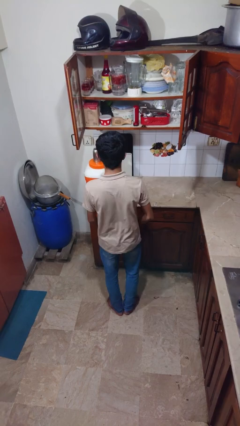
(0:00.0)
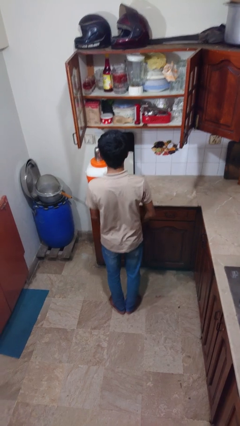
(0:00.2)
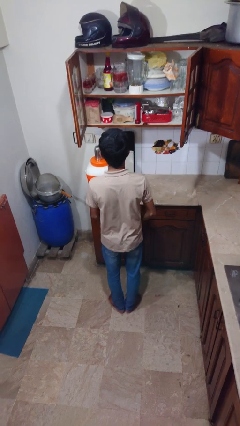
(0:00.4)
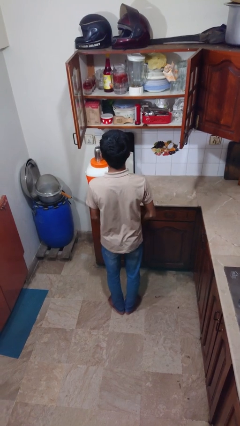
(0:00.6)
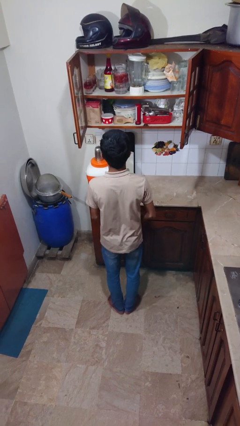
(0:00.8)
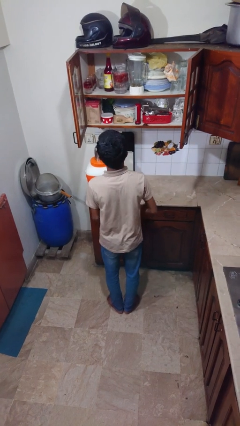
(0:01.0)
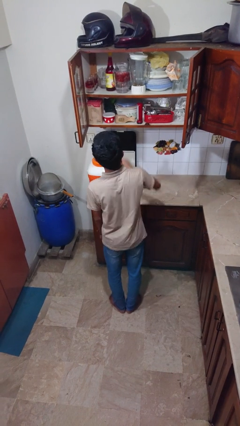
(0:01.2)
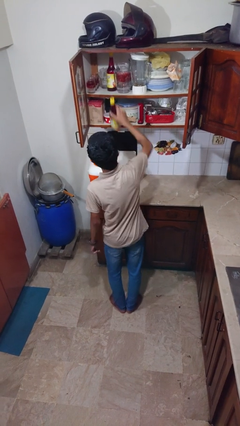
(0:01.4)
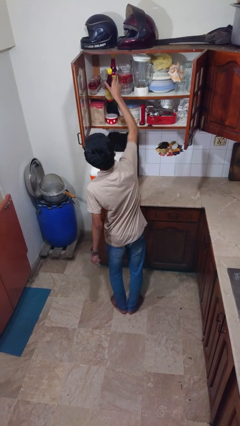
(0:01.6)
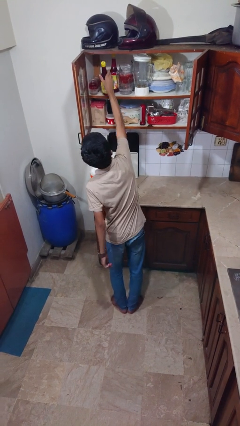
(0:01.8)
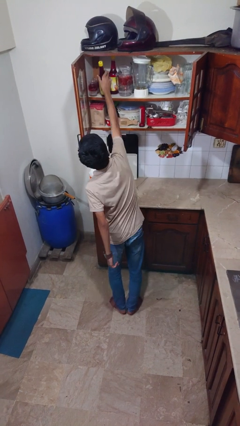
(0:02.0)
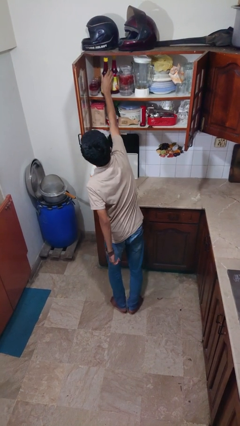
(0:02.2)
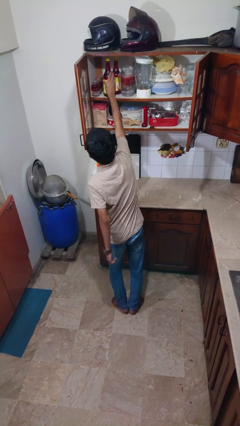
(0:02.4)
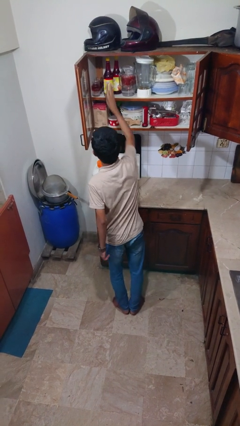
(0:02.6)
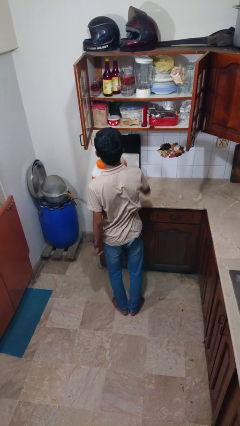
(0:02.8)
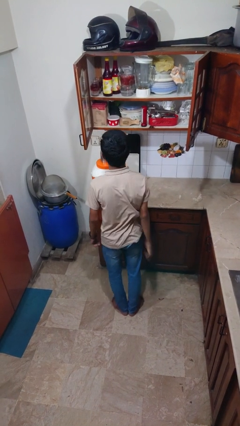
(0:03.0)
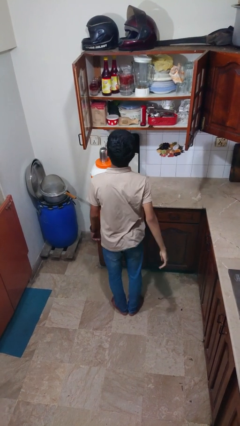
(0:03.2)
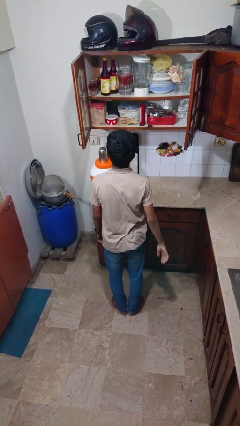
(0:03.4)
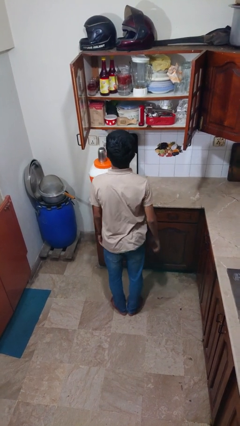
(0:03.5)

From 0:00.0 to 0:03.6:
person puts down object into cabinet

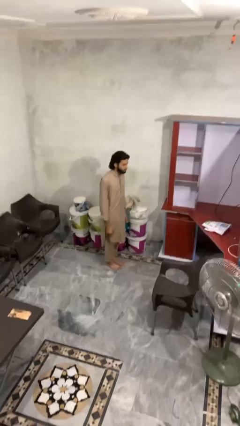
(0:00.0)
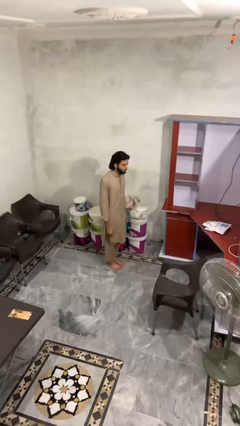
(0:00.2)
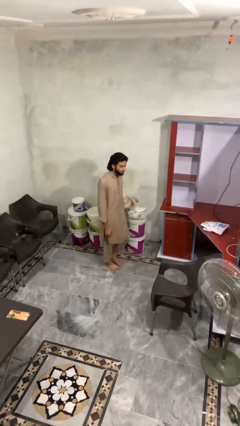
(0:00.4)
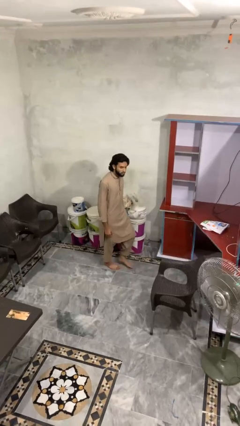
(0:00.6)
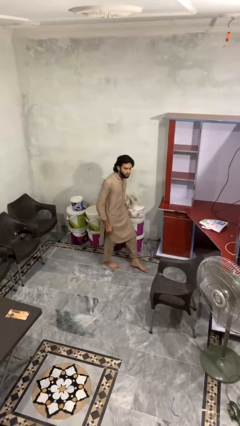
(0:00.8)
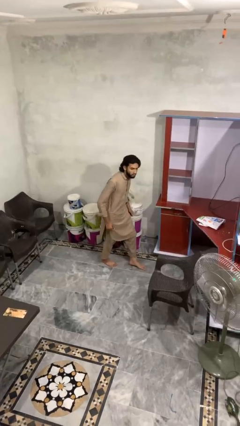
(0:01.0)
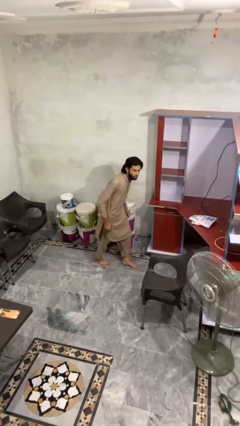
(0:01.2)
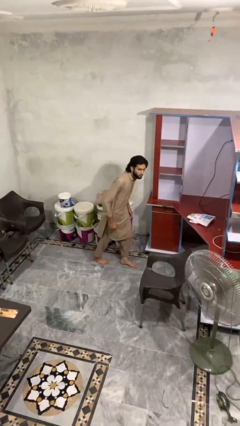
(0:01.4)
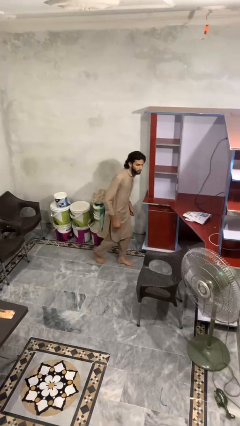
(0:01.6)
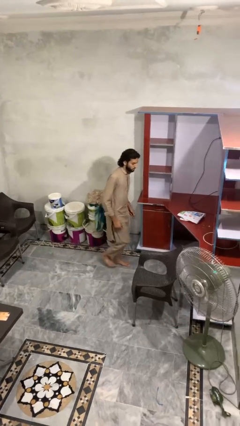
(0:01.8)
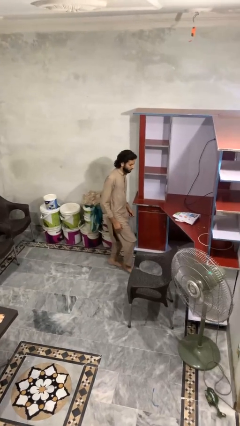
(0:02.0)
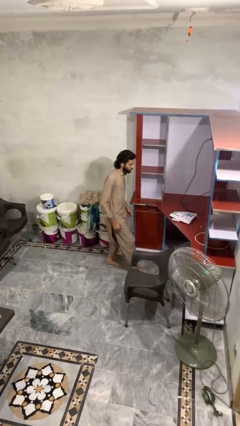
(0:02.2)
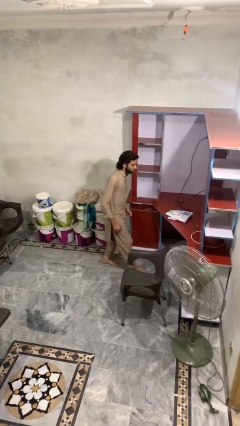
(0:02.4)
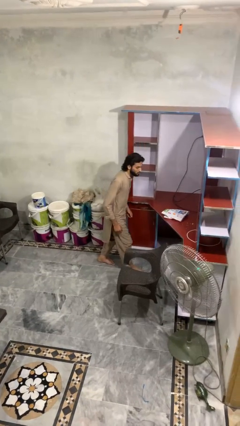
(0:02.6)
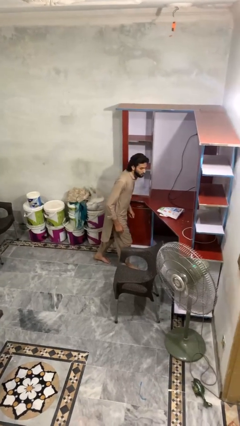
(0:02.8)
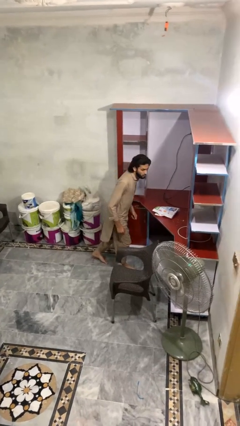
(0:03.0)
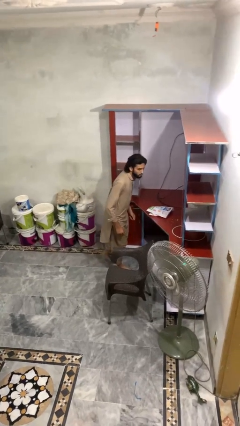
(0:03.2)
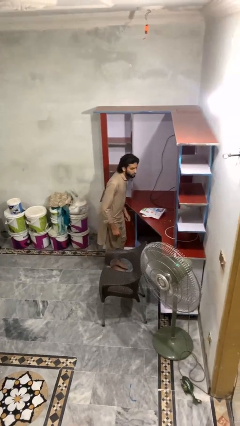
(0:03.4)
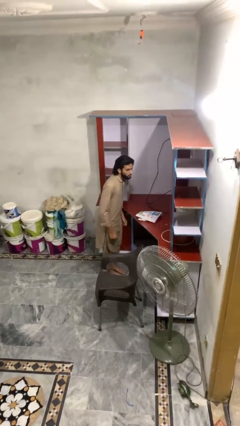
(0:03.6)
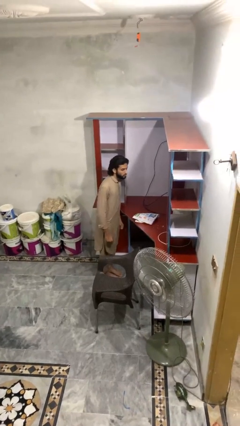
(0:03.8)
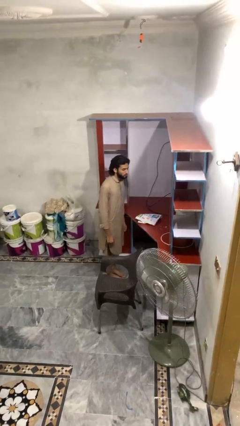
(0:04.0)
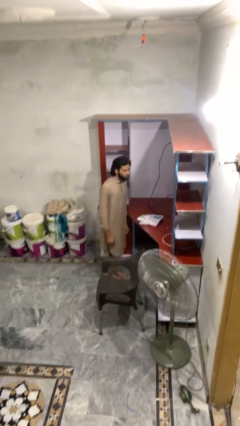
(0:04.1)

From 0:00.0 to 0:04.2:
person walks tiptoe

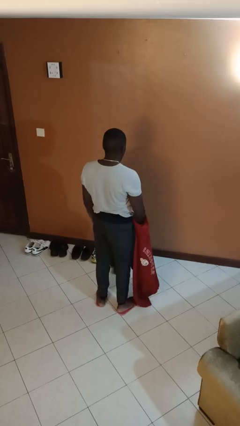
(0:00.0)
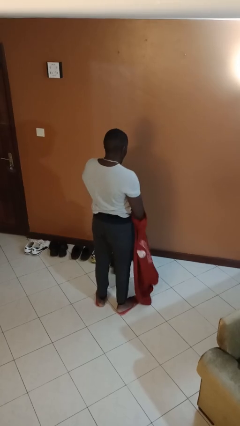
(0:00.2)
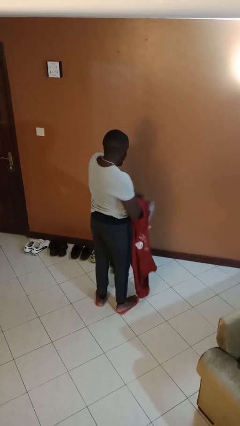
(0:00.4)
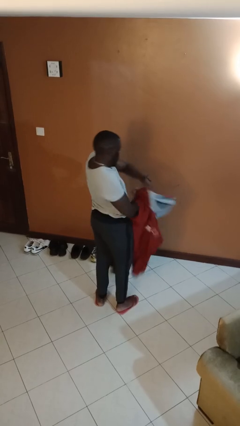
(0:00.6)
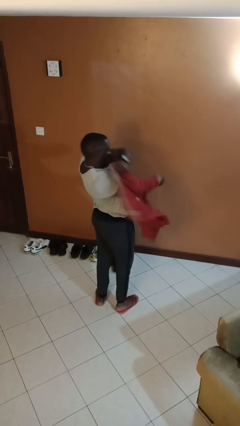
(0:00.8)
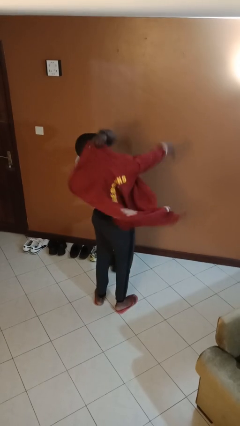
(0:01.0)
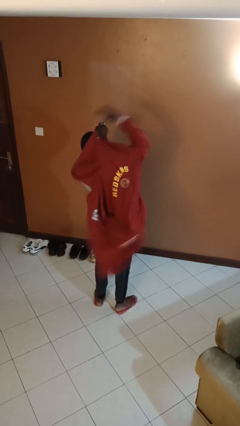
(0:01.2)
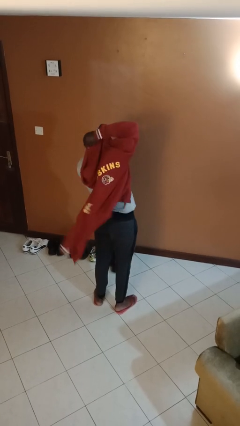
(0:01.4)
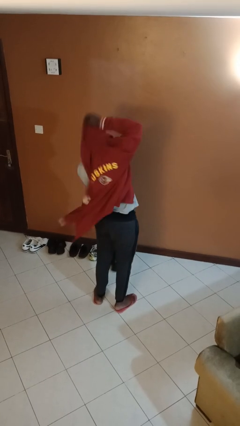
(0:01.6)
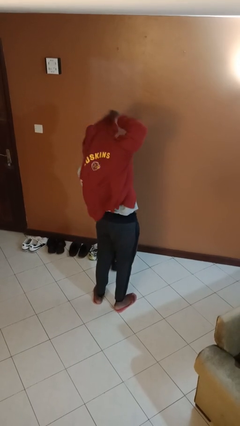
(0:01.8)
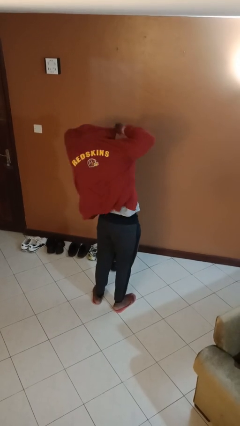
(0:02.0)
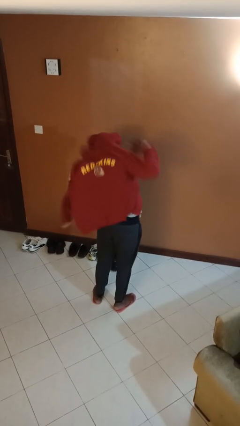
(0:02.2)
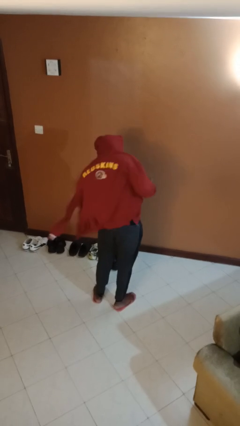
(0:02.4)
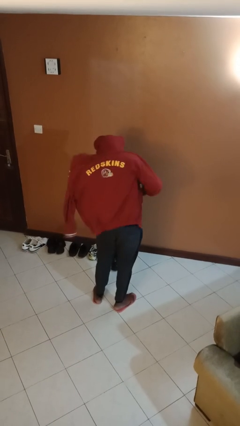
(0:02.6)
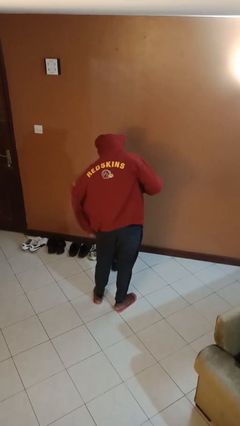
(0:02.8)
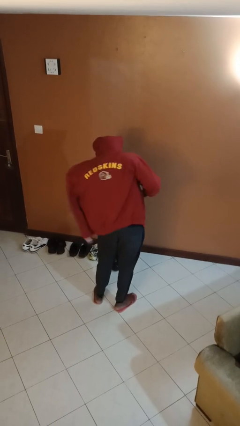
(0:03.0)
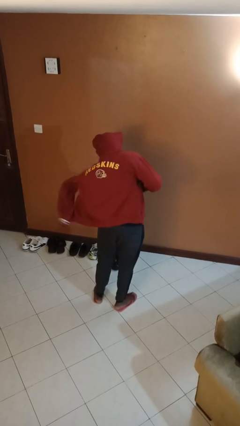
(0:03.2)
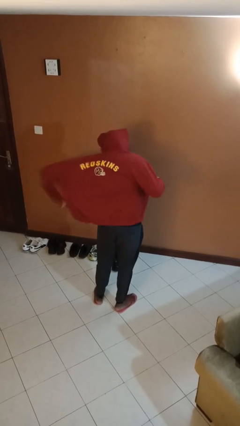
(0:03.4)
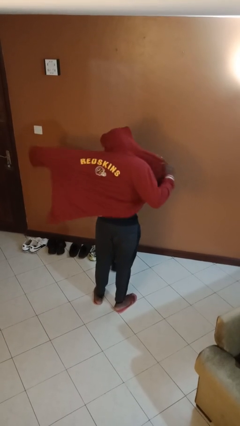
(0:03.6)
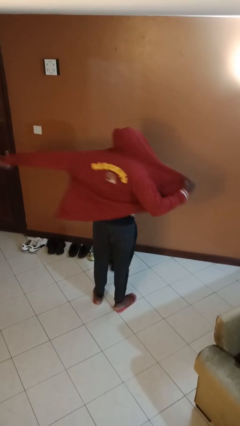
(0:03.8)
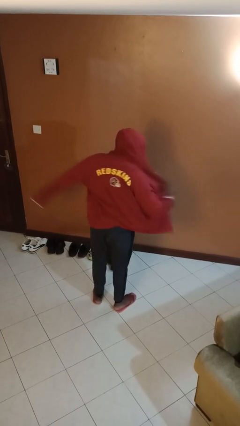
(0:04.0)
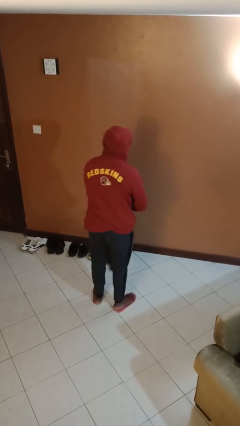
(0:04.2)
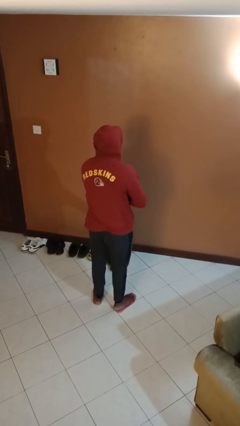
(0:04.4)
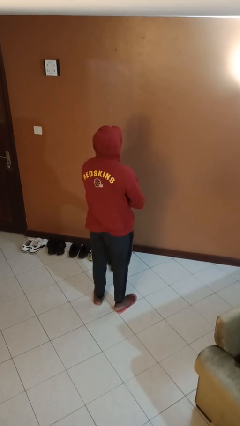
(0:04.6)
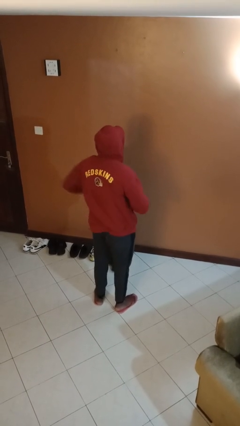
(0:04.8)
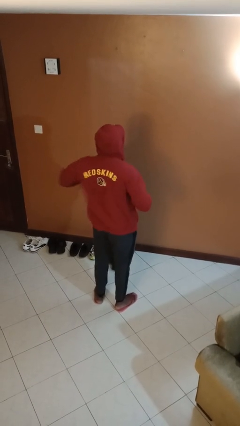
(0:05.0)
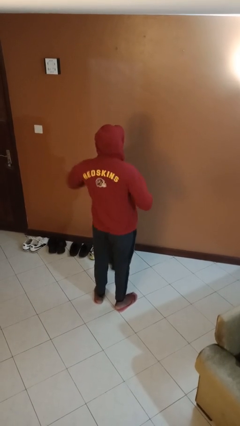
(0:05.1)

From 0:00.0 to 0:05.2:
person puts on hoodie

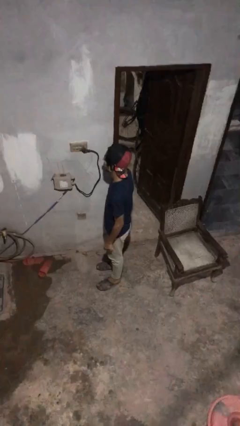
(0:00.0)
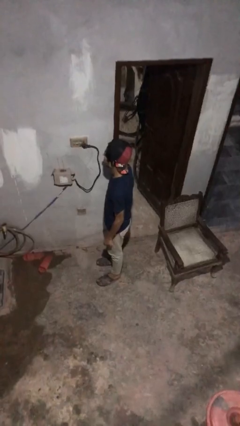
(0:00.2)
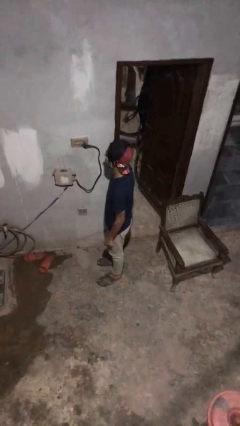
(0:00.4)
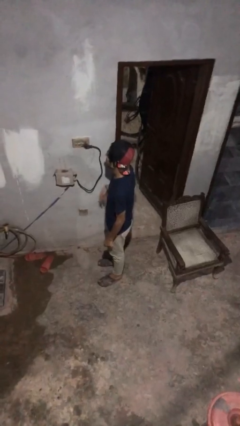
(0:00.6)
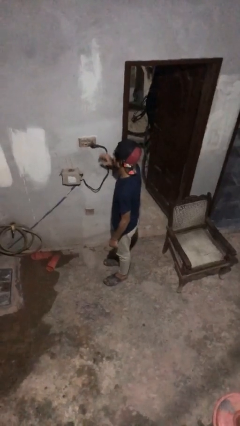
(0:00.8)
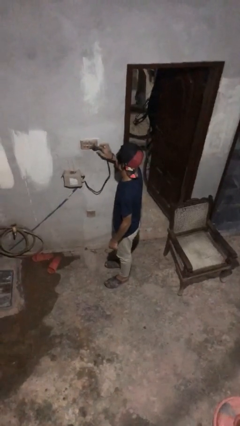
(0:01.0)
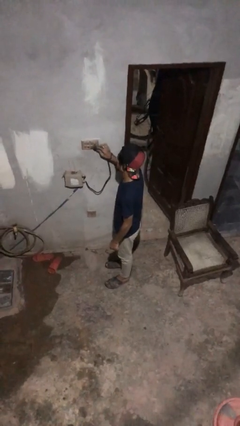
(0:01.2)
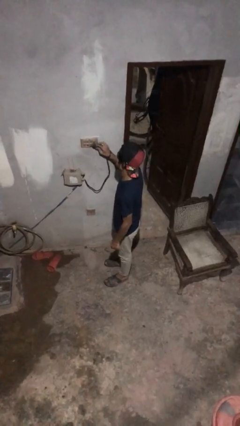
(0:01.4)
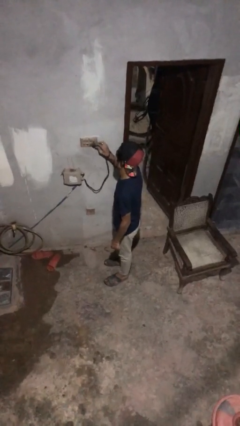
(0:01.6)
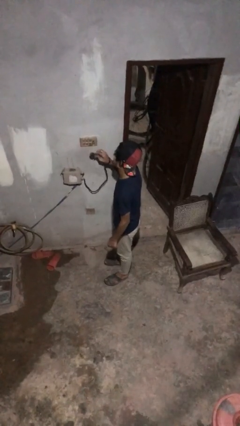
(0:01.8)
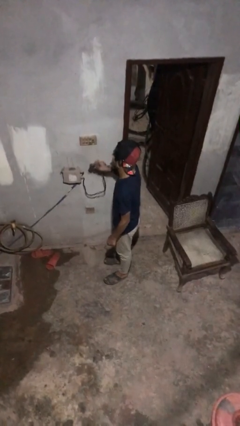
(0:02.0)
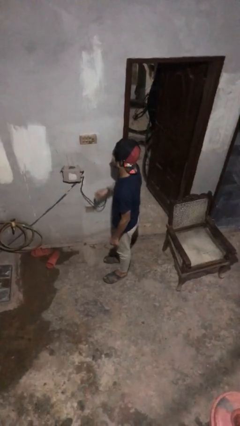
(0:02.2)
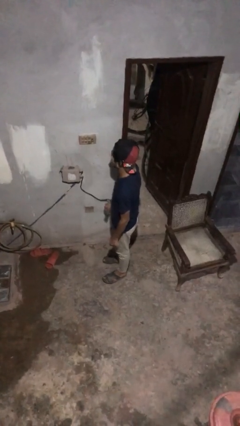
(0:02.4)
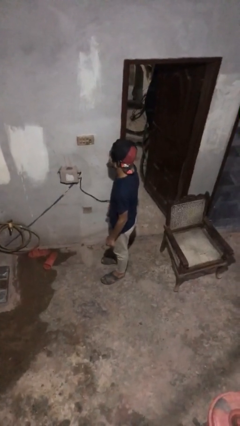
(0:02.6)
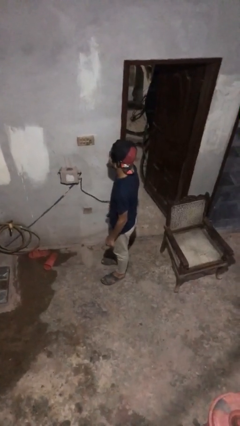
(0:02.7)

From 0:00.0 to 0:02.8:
person unplugs from electrical socket

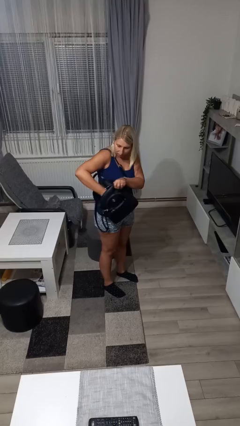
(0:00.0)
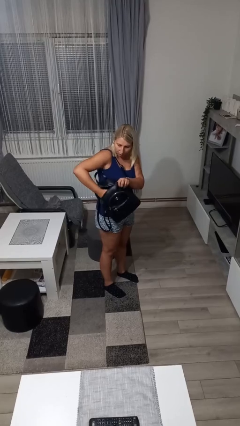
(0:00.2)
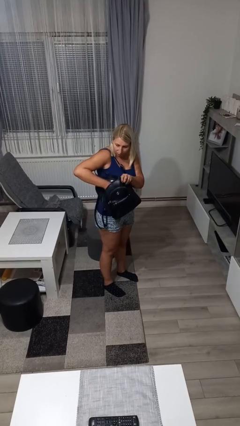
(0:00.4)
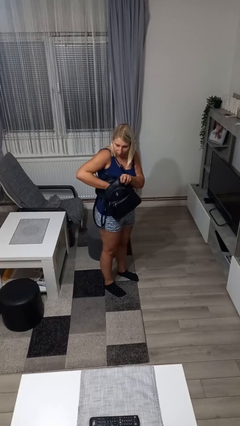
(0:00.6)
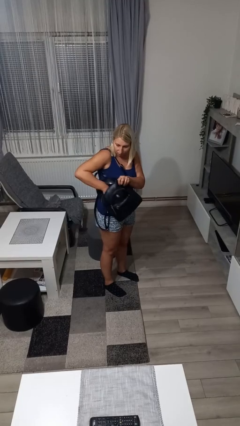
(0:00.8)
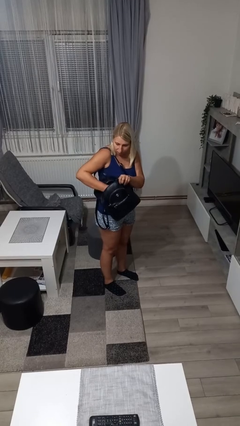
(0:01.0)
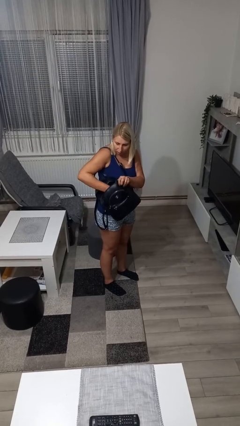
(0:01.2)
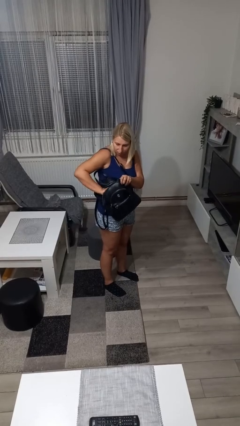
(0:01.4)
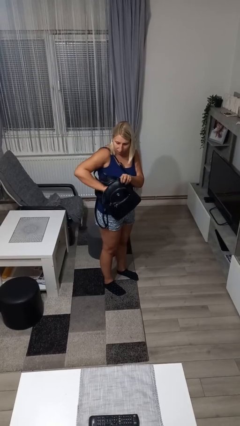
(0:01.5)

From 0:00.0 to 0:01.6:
person searches in backpack

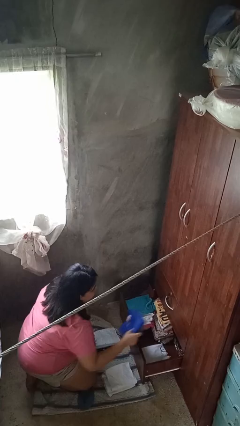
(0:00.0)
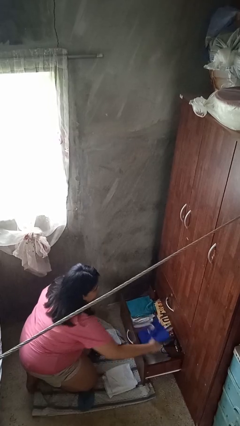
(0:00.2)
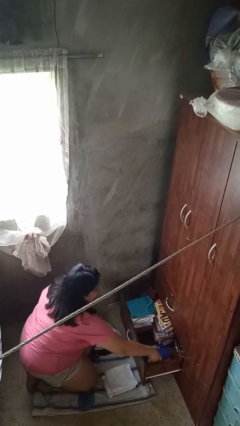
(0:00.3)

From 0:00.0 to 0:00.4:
person puts clothes into dresser
